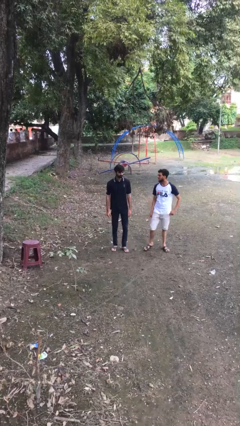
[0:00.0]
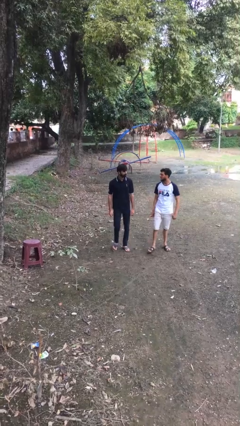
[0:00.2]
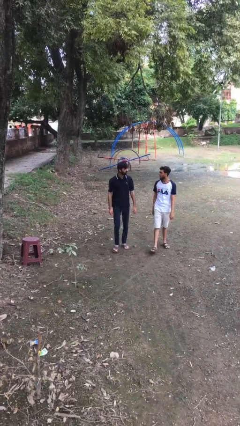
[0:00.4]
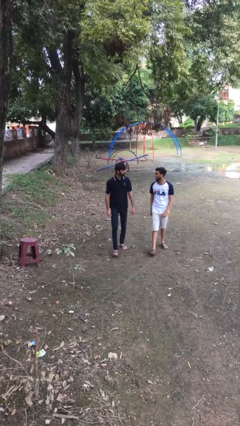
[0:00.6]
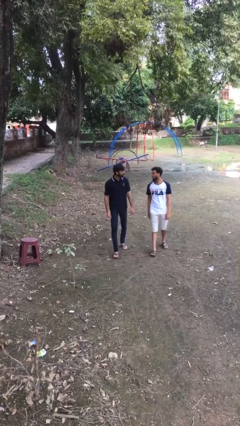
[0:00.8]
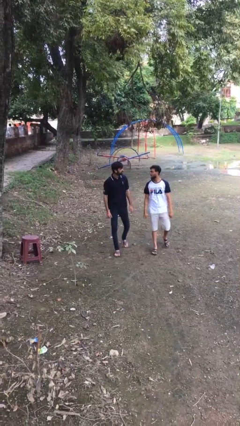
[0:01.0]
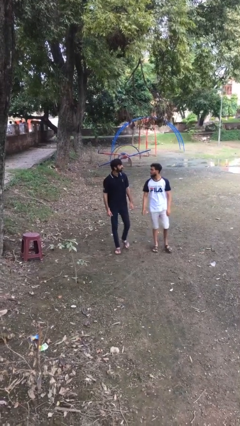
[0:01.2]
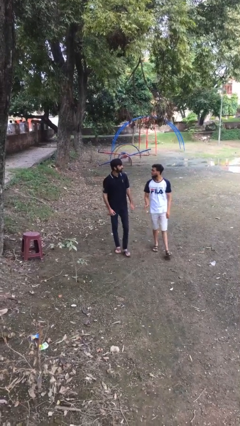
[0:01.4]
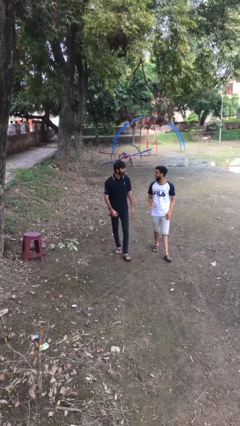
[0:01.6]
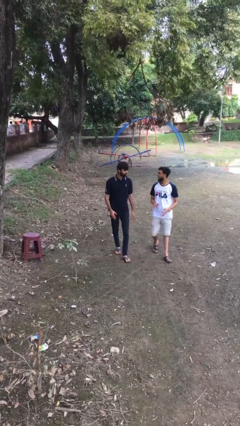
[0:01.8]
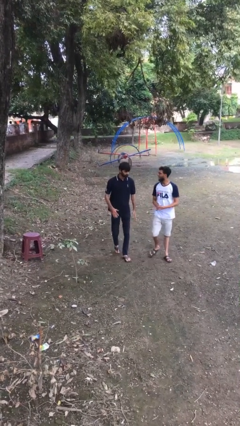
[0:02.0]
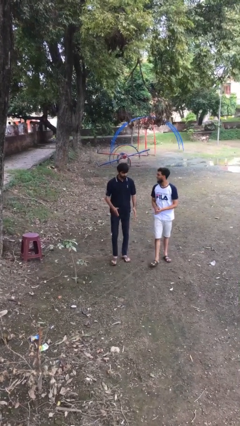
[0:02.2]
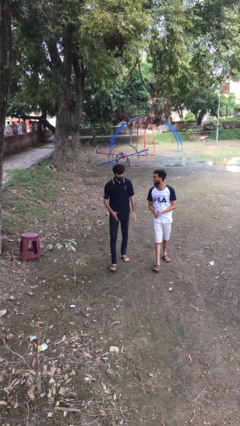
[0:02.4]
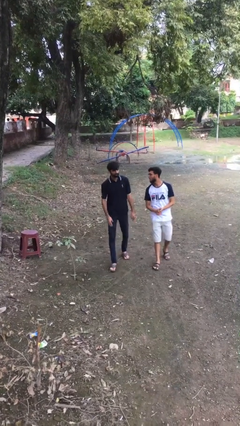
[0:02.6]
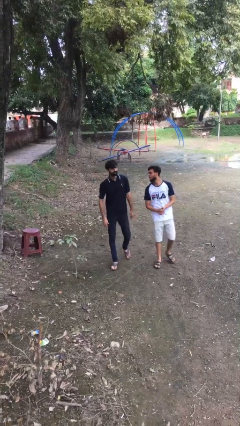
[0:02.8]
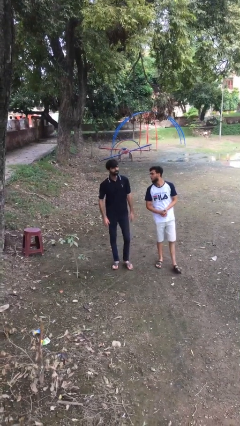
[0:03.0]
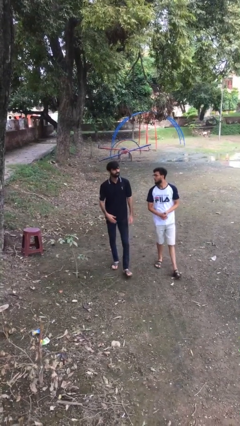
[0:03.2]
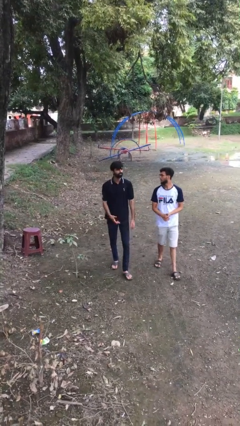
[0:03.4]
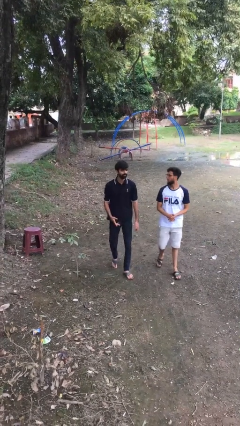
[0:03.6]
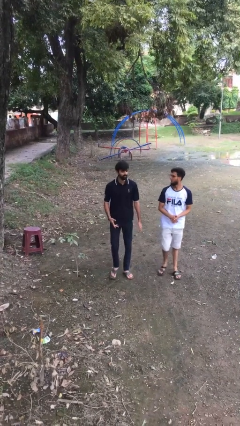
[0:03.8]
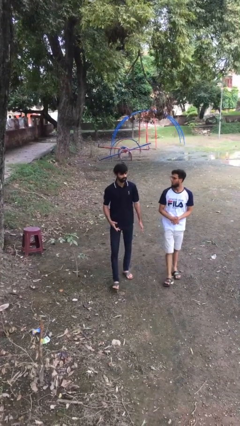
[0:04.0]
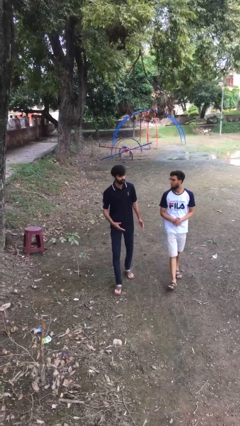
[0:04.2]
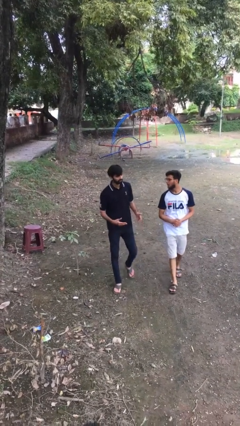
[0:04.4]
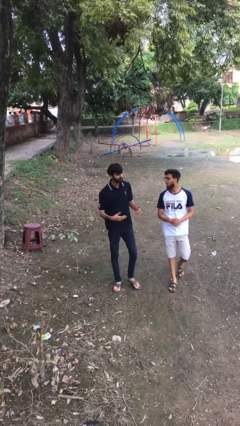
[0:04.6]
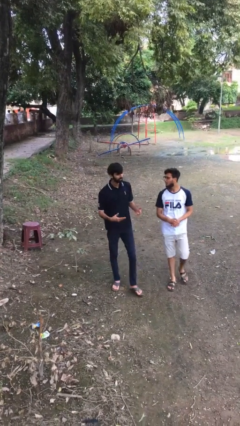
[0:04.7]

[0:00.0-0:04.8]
person talks to person

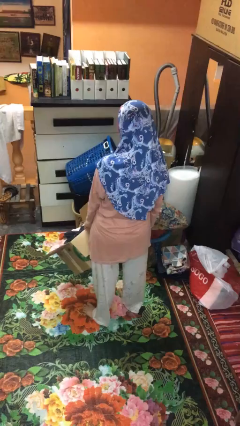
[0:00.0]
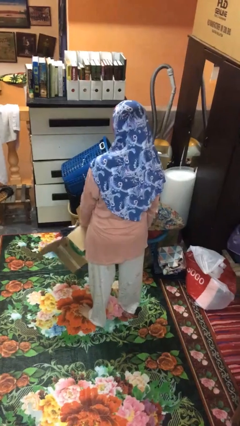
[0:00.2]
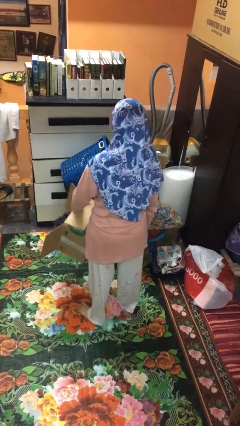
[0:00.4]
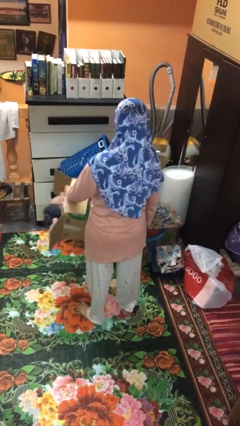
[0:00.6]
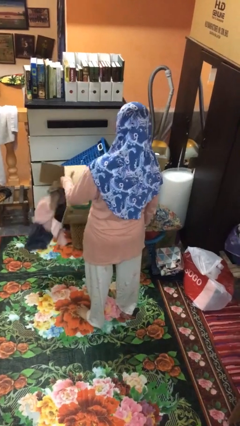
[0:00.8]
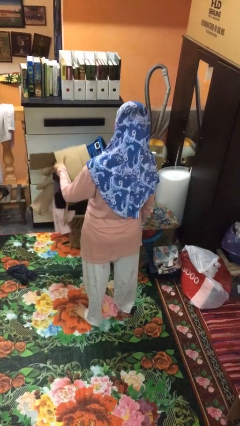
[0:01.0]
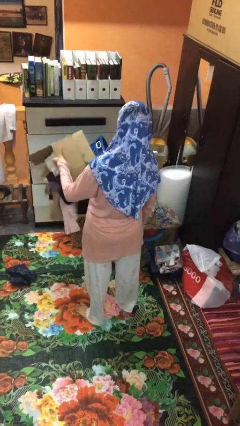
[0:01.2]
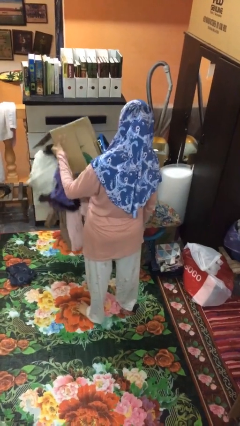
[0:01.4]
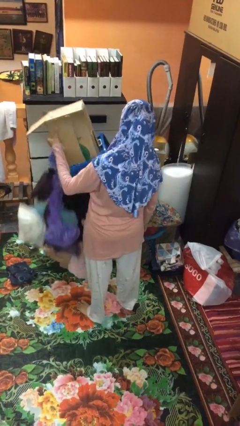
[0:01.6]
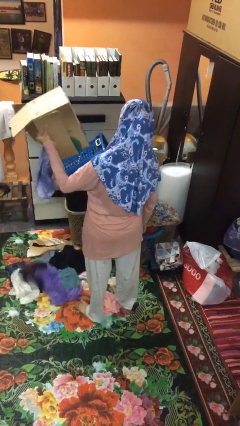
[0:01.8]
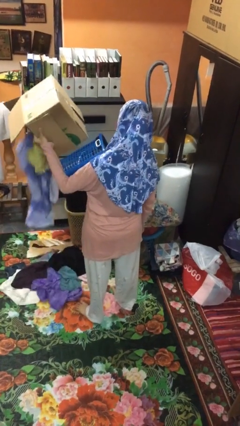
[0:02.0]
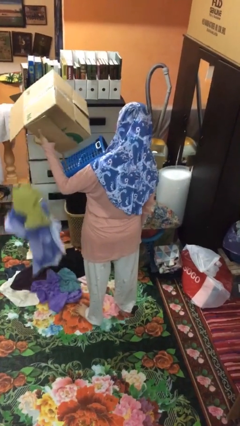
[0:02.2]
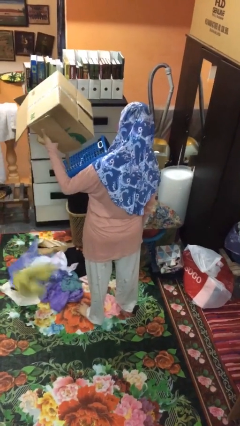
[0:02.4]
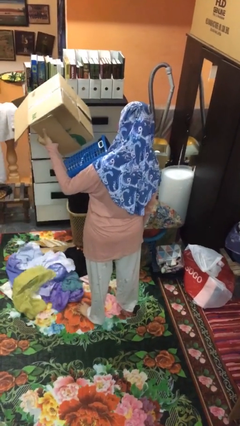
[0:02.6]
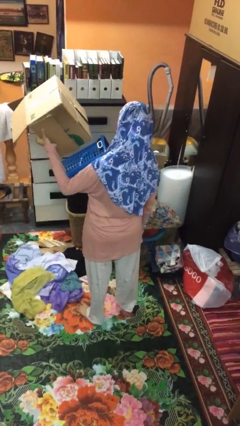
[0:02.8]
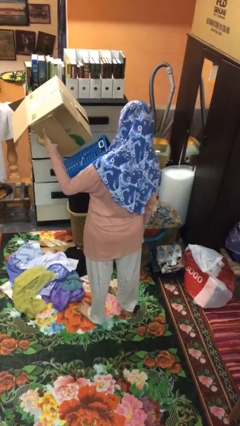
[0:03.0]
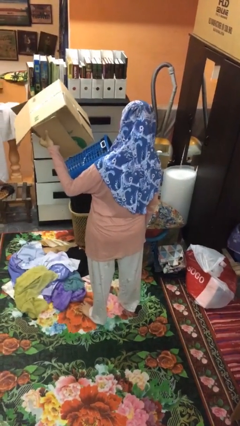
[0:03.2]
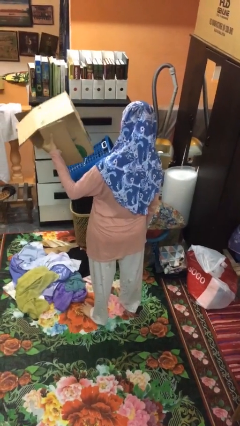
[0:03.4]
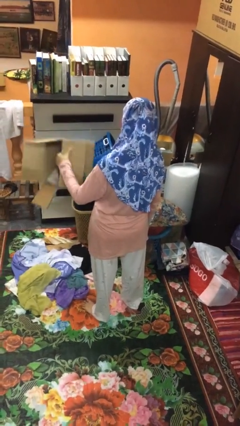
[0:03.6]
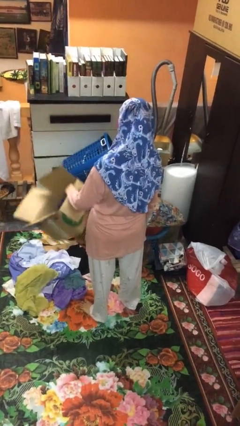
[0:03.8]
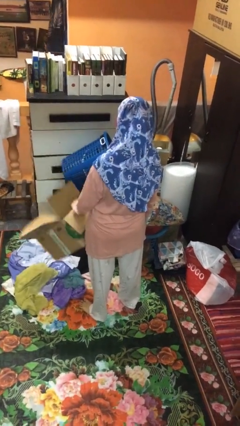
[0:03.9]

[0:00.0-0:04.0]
person unloads box onto floor

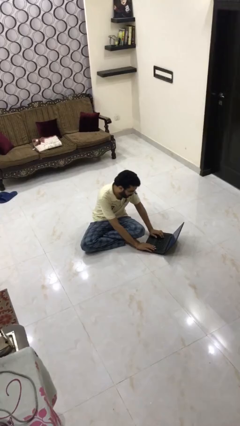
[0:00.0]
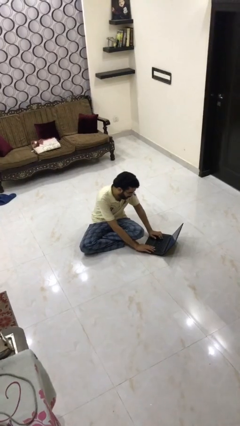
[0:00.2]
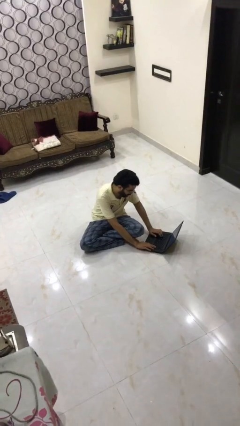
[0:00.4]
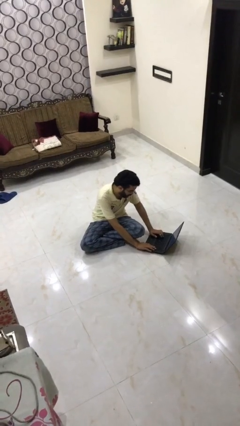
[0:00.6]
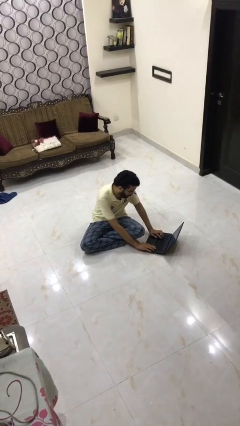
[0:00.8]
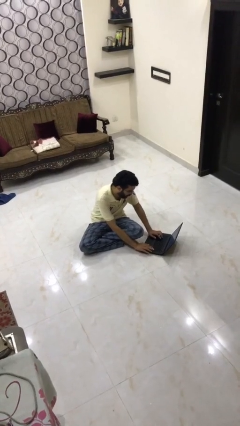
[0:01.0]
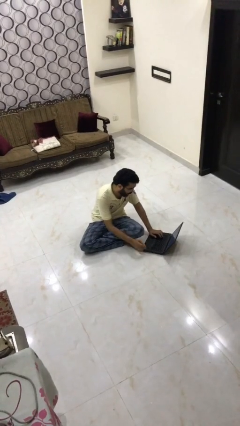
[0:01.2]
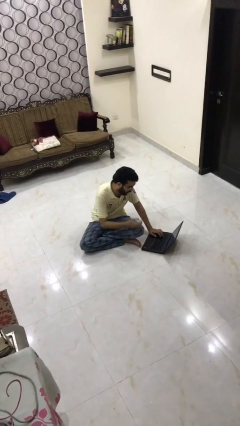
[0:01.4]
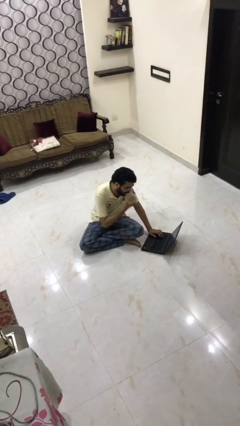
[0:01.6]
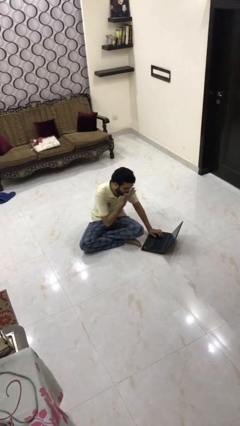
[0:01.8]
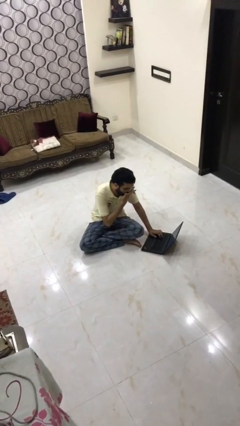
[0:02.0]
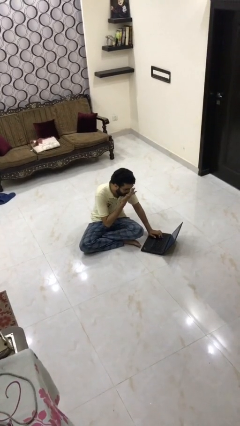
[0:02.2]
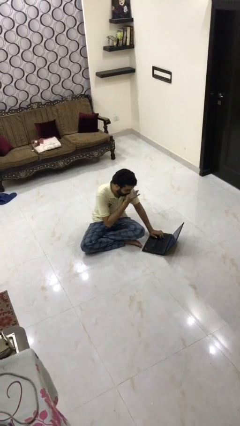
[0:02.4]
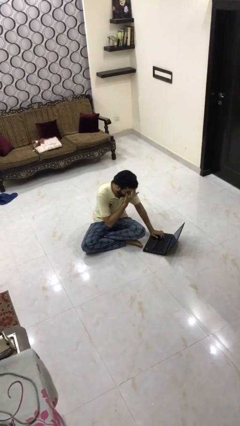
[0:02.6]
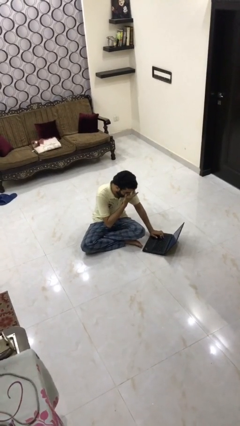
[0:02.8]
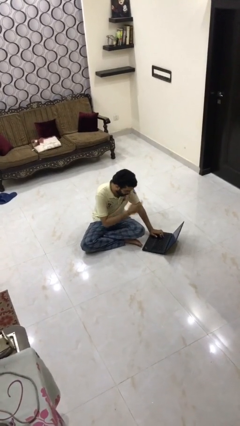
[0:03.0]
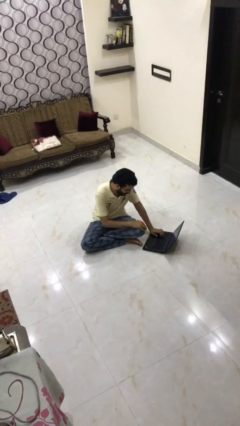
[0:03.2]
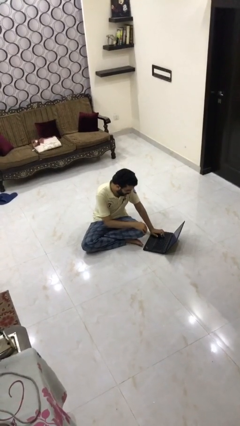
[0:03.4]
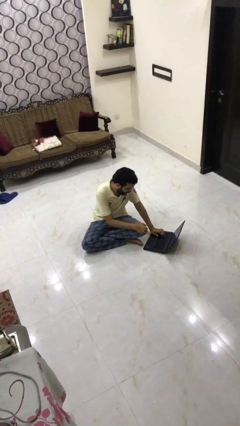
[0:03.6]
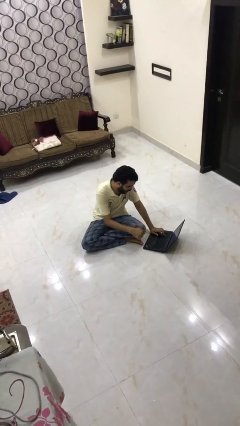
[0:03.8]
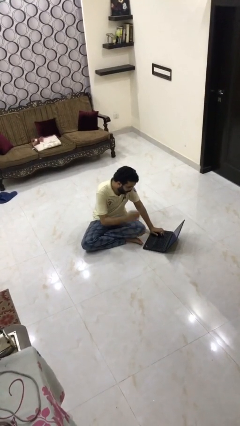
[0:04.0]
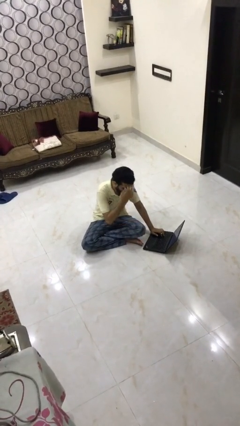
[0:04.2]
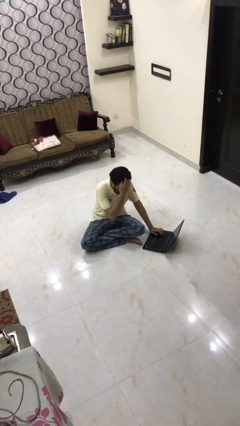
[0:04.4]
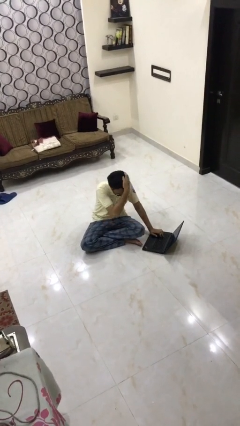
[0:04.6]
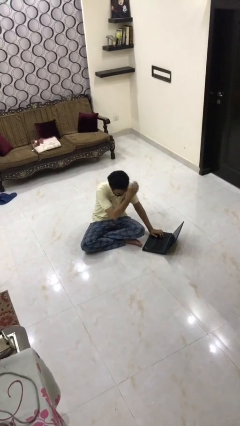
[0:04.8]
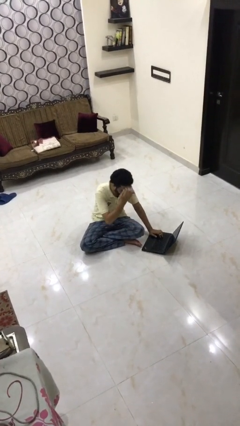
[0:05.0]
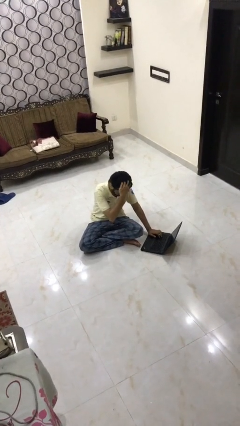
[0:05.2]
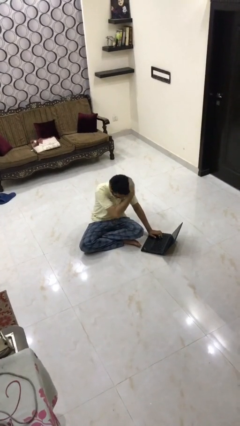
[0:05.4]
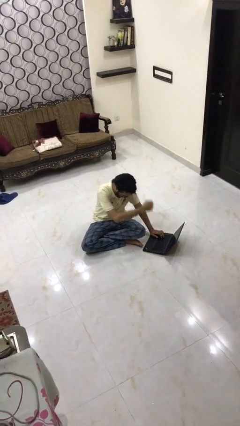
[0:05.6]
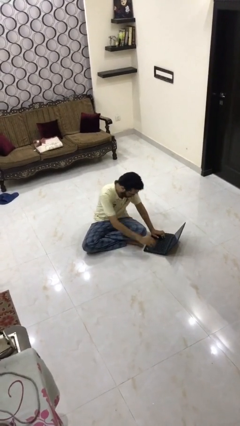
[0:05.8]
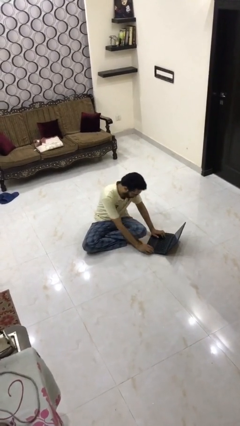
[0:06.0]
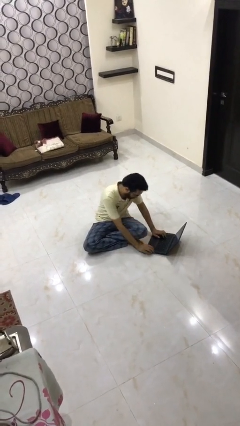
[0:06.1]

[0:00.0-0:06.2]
person interacts with laptop

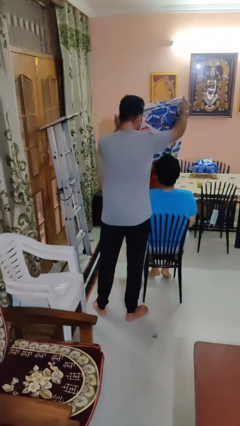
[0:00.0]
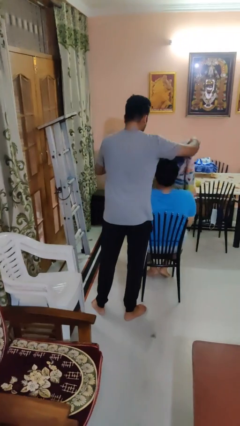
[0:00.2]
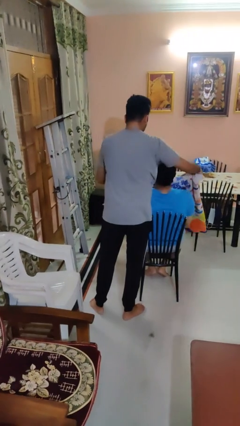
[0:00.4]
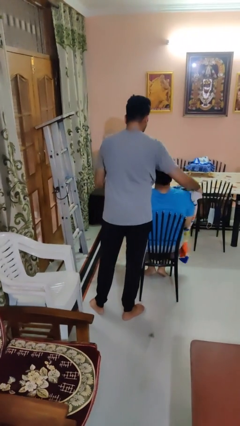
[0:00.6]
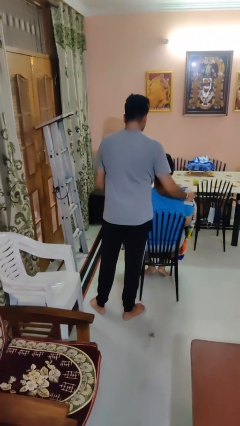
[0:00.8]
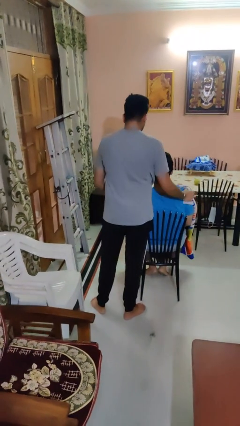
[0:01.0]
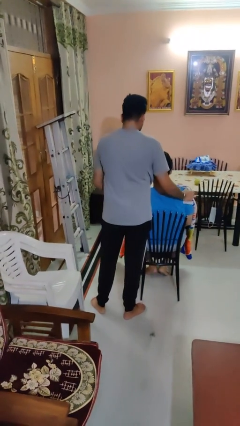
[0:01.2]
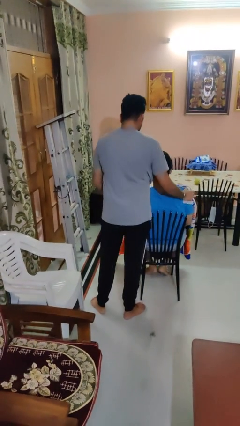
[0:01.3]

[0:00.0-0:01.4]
person covers friend with blanket

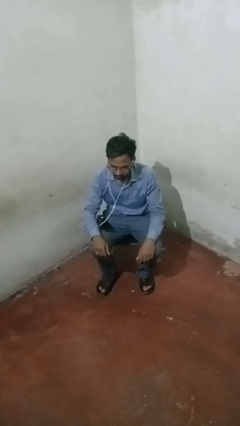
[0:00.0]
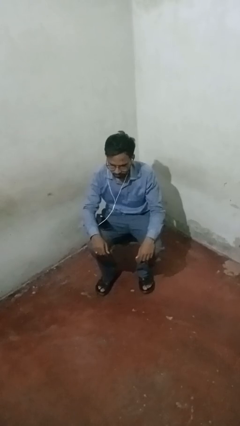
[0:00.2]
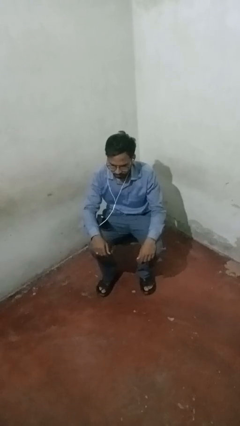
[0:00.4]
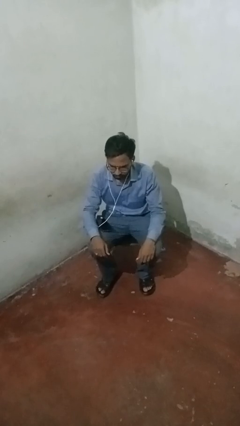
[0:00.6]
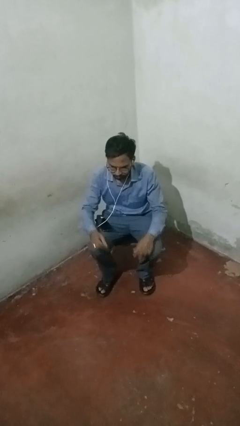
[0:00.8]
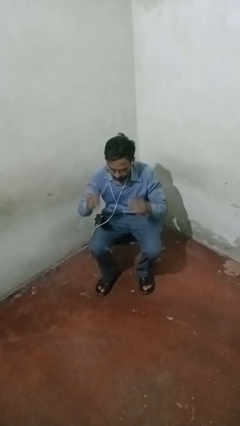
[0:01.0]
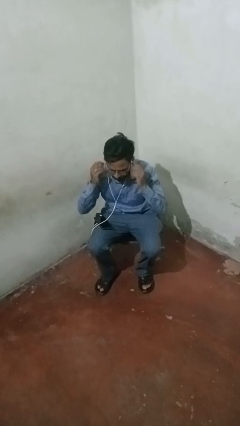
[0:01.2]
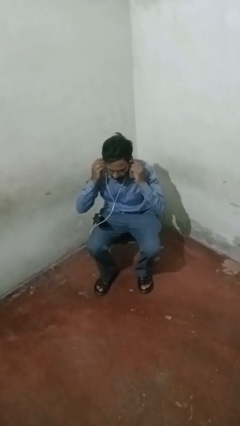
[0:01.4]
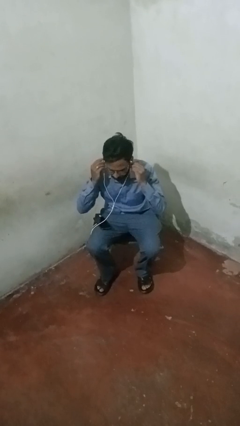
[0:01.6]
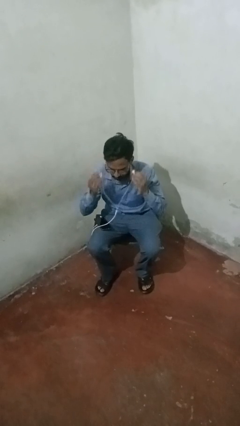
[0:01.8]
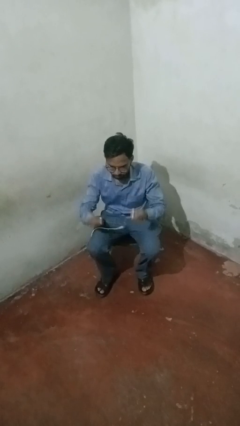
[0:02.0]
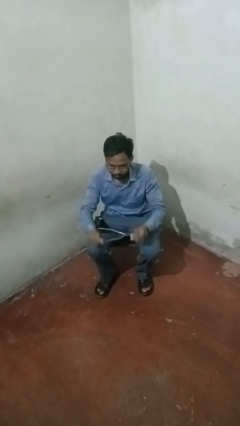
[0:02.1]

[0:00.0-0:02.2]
person takes off headphones
